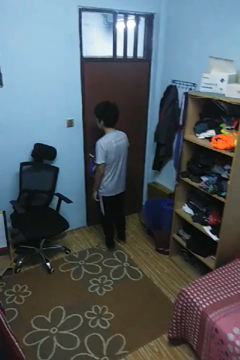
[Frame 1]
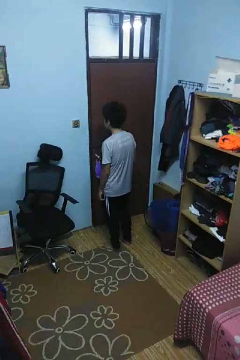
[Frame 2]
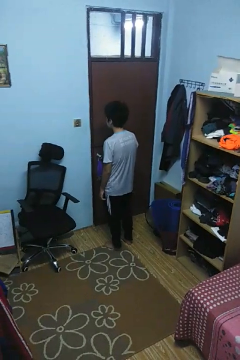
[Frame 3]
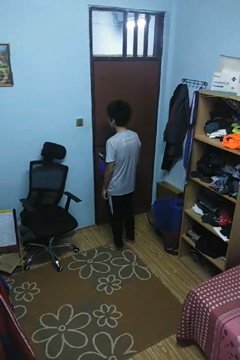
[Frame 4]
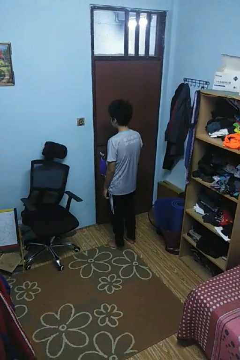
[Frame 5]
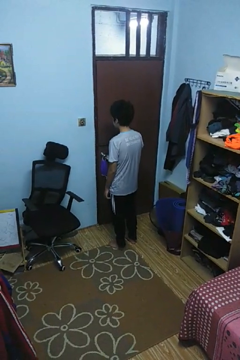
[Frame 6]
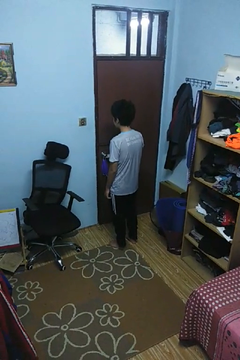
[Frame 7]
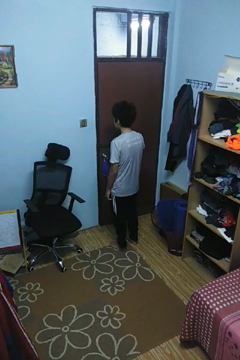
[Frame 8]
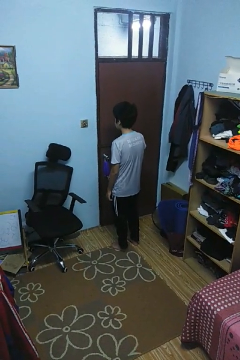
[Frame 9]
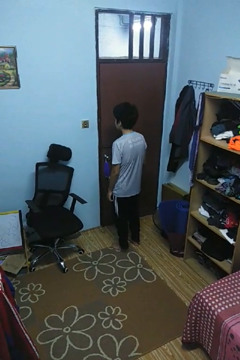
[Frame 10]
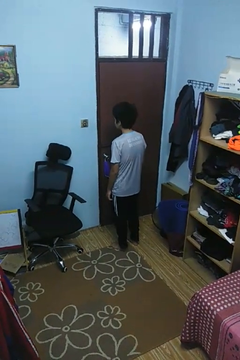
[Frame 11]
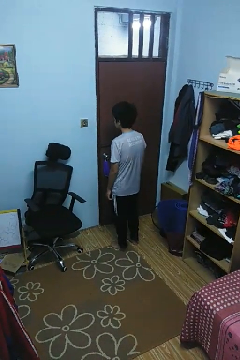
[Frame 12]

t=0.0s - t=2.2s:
person locks door with keys

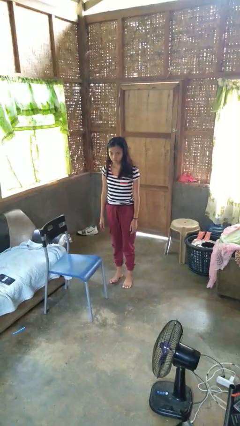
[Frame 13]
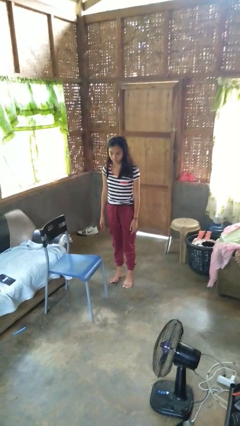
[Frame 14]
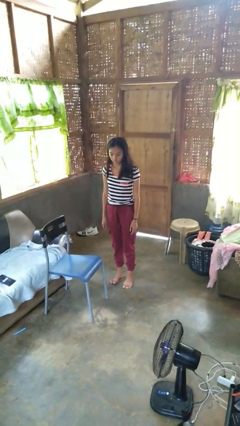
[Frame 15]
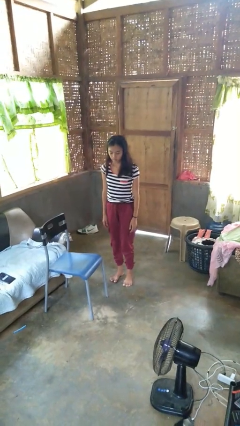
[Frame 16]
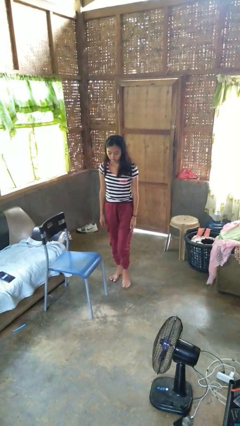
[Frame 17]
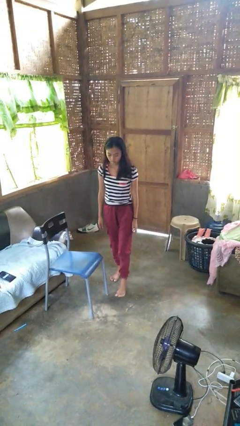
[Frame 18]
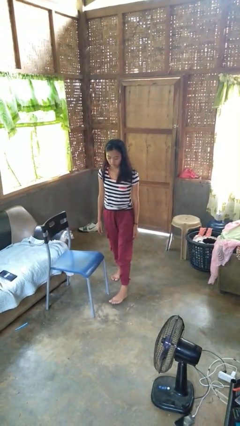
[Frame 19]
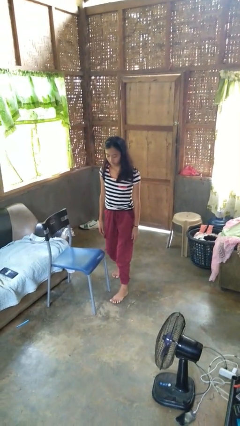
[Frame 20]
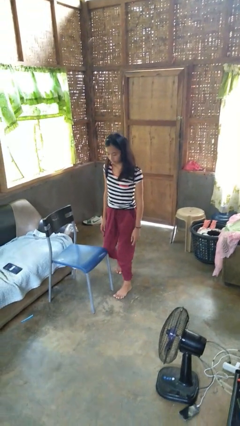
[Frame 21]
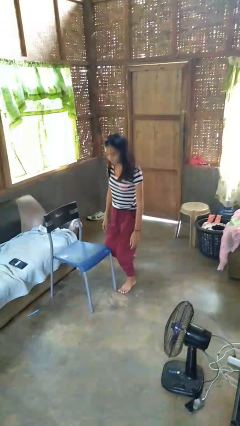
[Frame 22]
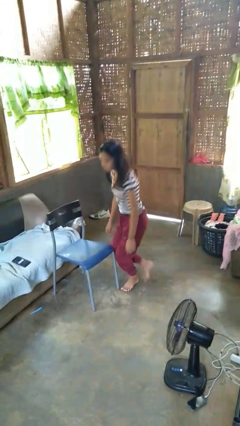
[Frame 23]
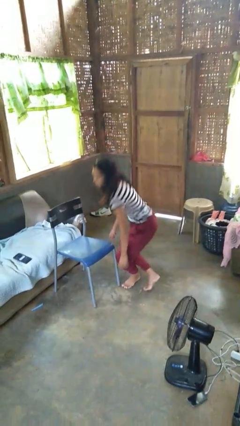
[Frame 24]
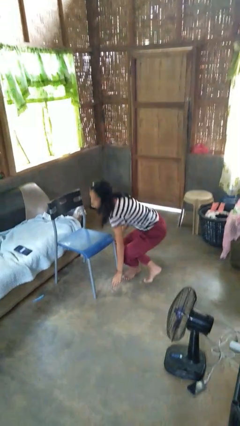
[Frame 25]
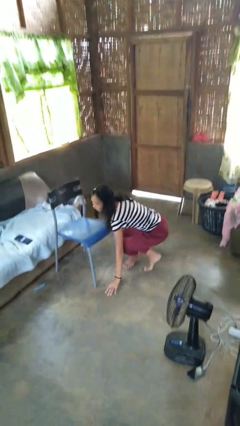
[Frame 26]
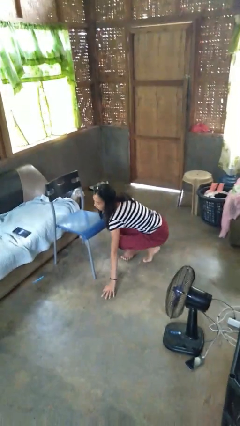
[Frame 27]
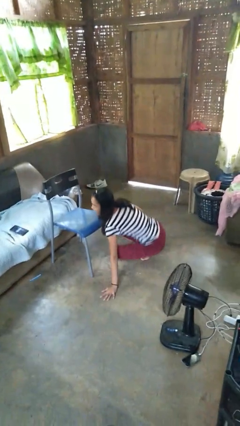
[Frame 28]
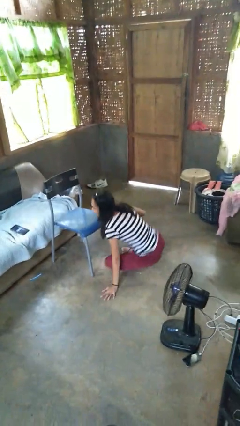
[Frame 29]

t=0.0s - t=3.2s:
person trips on object on floor

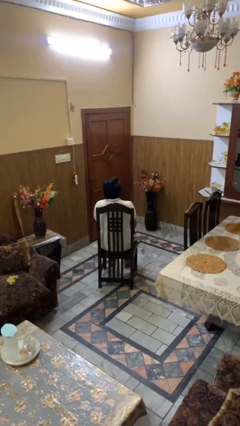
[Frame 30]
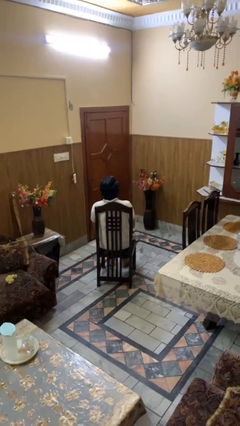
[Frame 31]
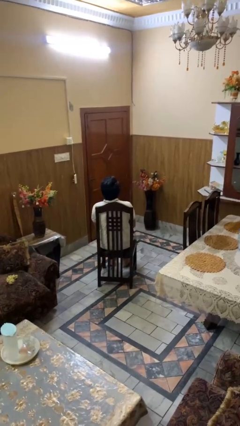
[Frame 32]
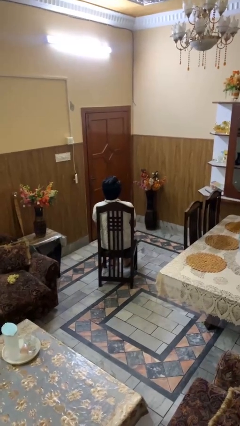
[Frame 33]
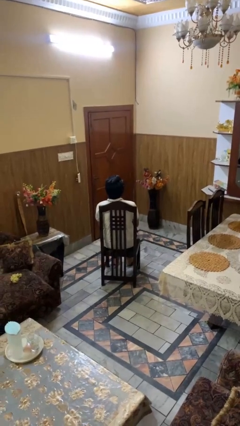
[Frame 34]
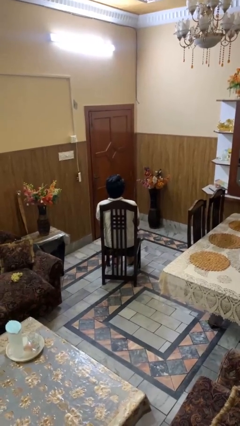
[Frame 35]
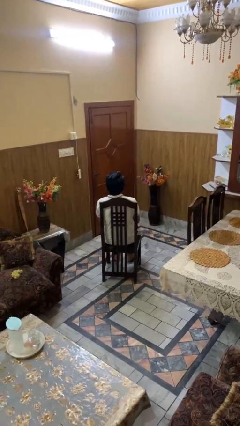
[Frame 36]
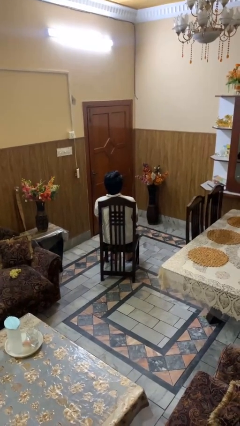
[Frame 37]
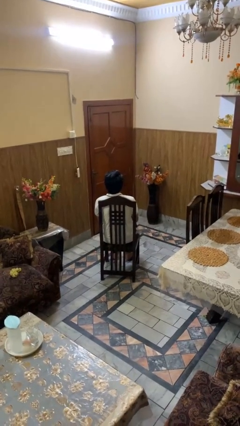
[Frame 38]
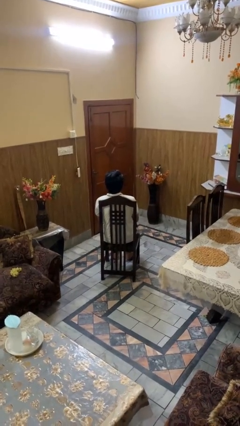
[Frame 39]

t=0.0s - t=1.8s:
person sits down

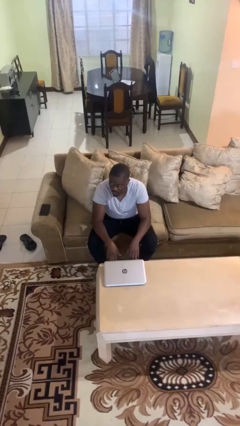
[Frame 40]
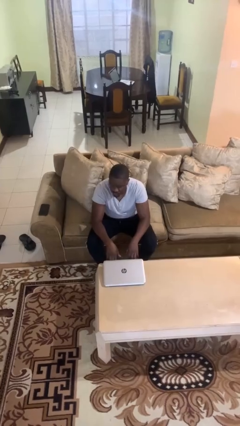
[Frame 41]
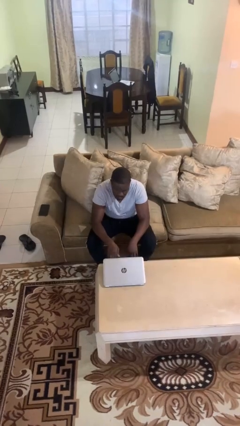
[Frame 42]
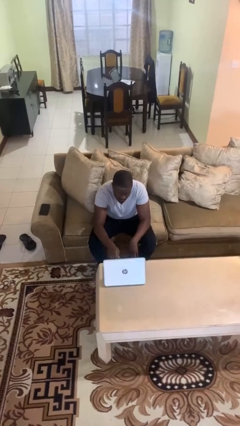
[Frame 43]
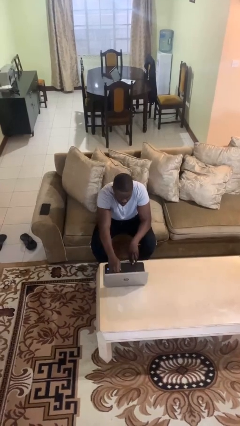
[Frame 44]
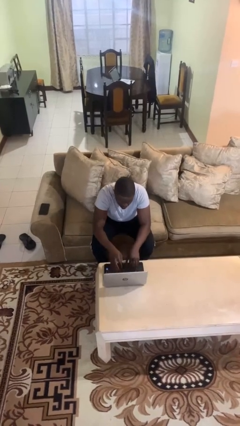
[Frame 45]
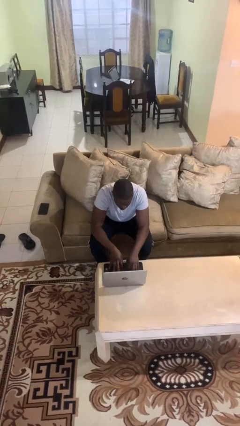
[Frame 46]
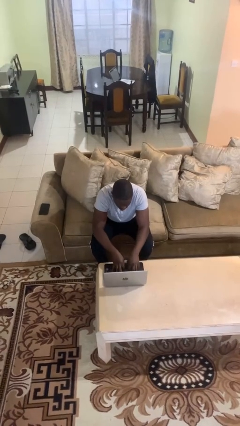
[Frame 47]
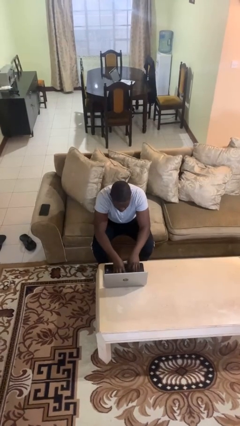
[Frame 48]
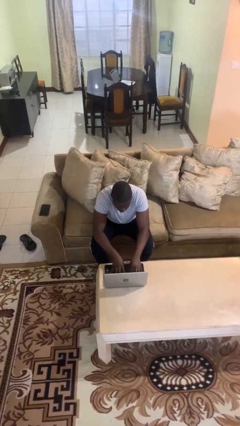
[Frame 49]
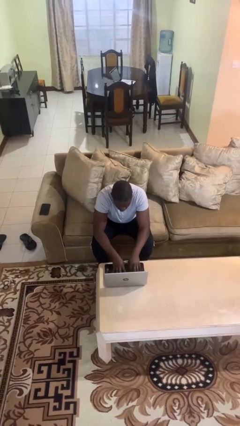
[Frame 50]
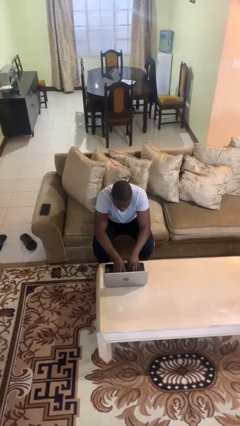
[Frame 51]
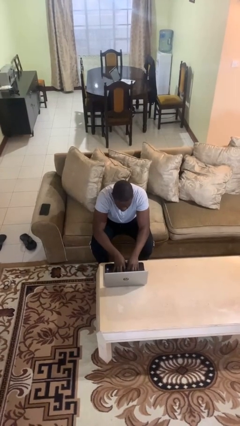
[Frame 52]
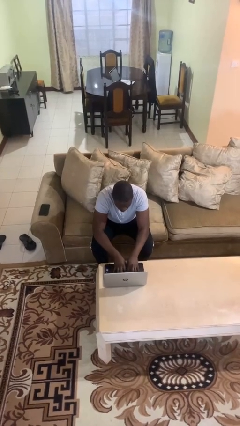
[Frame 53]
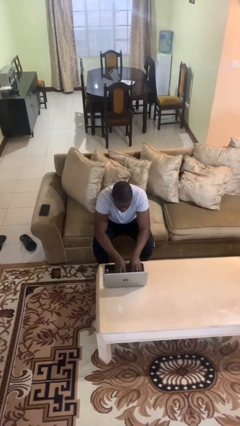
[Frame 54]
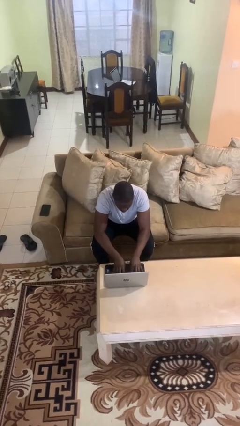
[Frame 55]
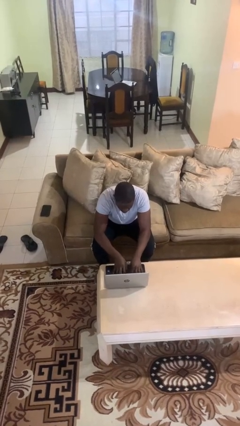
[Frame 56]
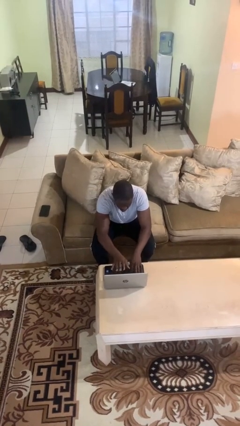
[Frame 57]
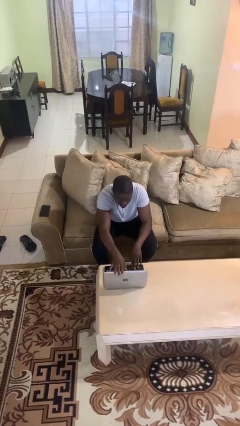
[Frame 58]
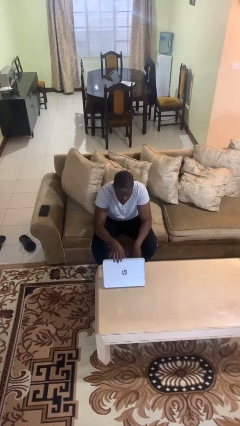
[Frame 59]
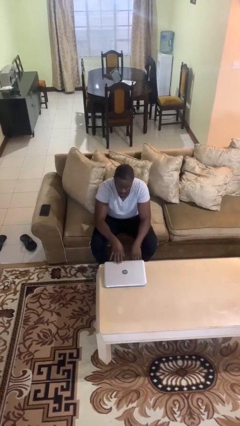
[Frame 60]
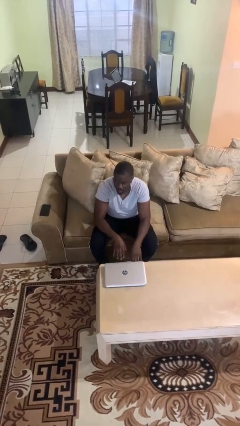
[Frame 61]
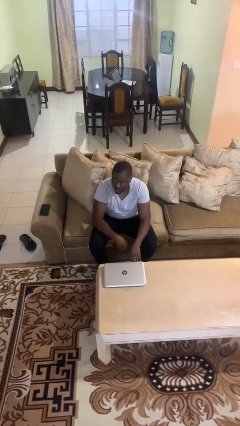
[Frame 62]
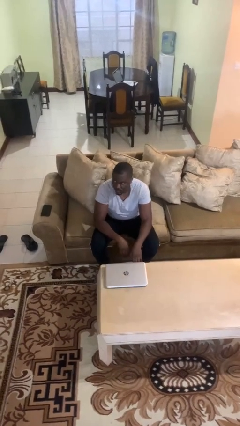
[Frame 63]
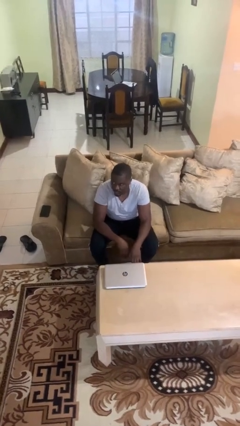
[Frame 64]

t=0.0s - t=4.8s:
person interacts with laptop

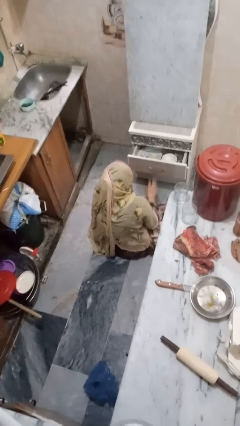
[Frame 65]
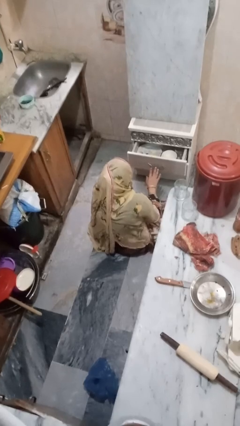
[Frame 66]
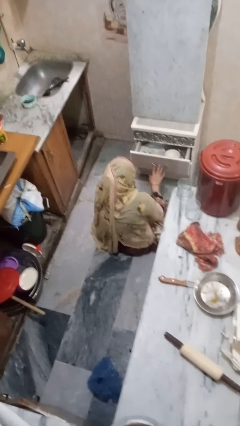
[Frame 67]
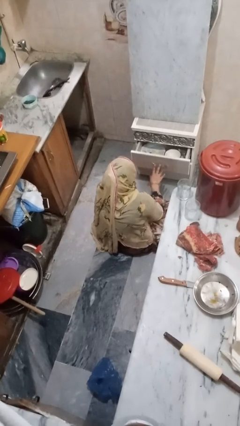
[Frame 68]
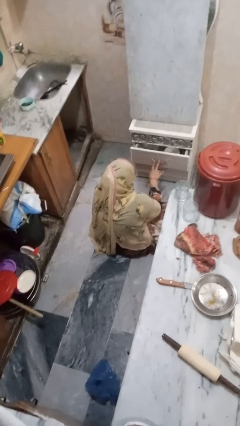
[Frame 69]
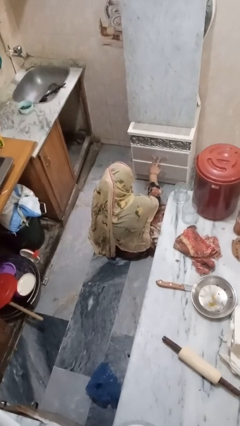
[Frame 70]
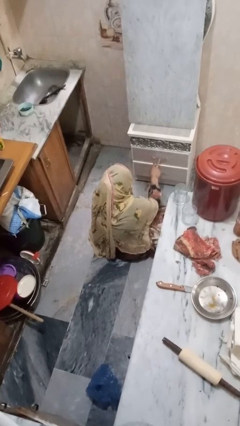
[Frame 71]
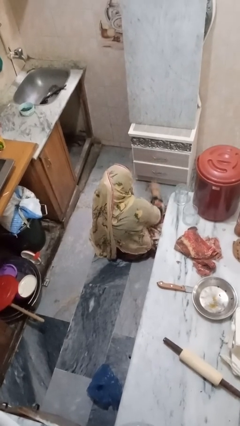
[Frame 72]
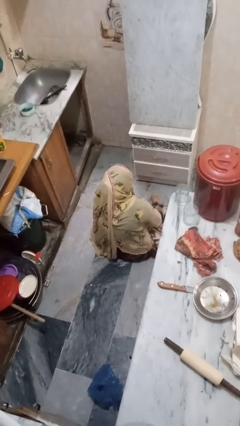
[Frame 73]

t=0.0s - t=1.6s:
person closes kitchen drawer

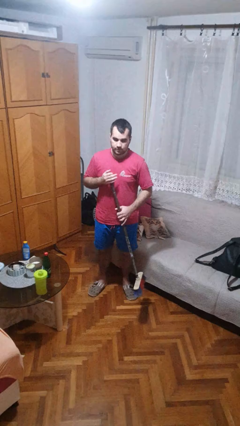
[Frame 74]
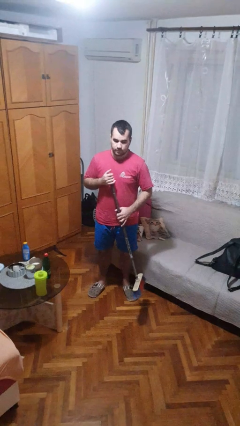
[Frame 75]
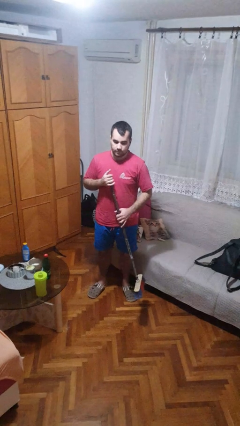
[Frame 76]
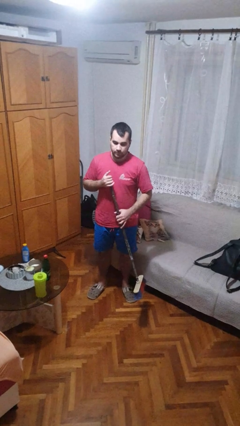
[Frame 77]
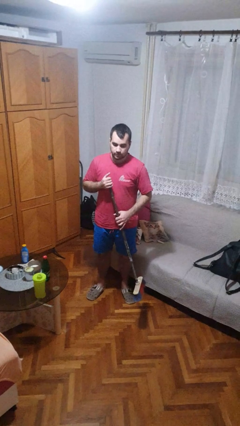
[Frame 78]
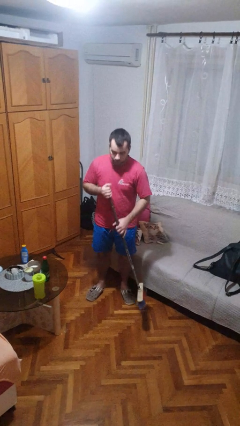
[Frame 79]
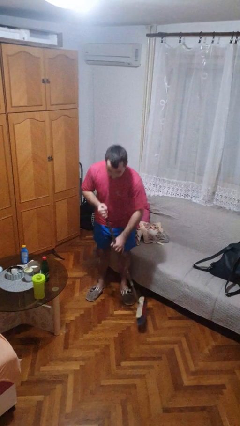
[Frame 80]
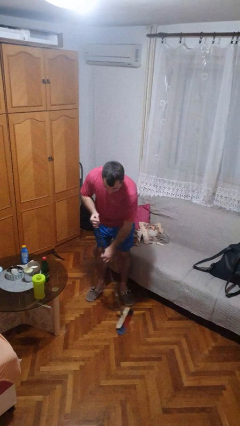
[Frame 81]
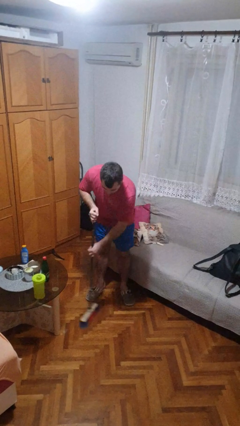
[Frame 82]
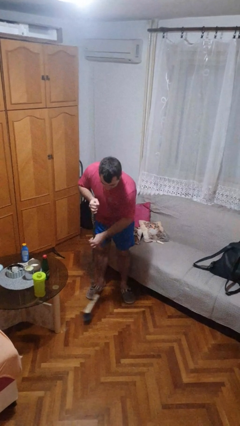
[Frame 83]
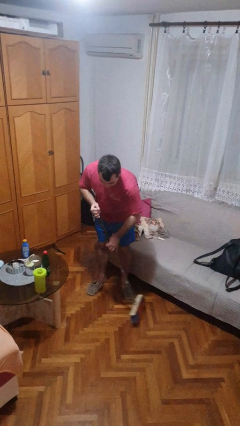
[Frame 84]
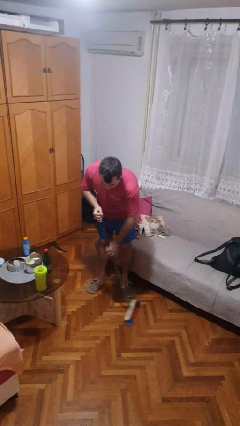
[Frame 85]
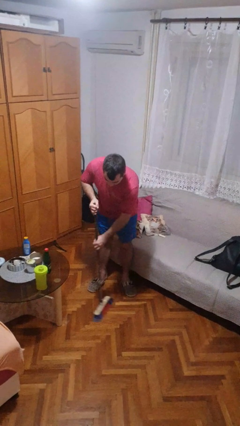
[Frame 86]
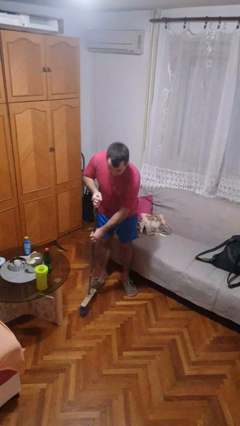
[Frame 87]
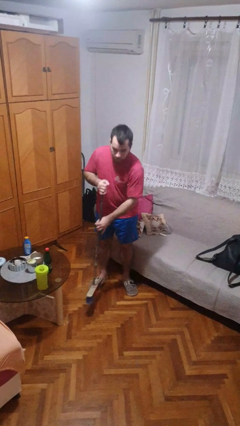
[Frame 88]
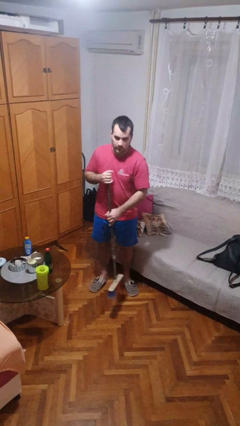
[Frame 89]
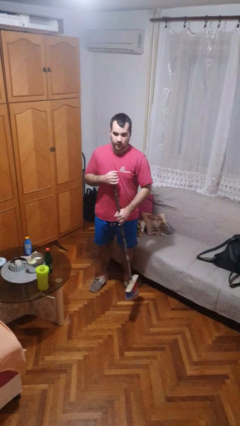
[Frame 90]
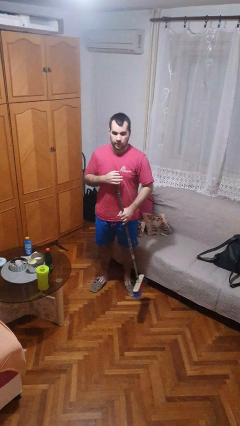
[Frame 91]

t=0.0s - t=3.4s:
person sweeps floor

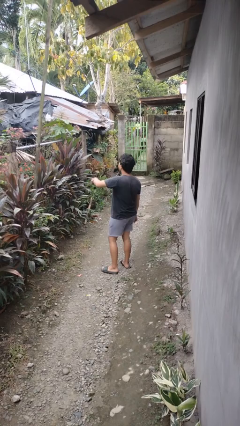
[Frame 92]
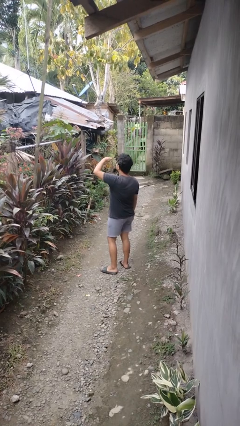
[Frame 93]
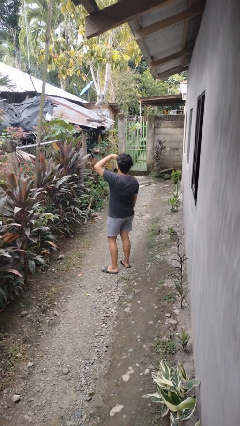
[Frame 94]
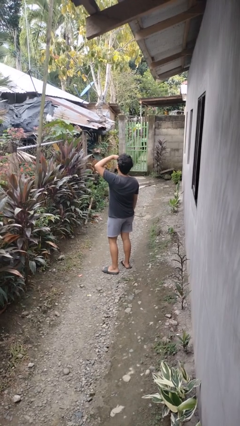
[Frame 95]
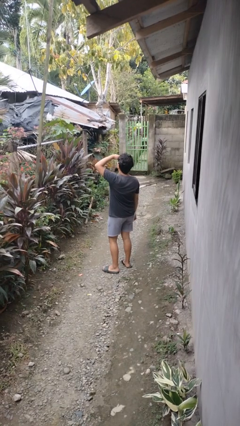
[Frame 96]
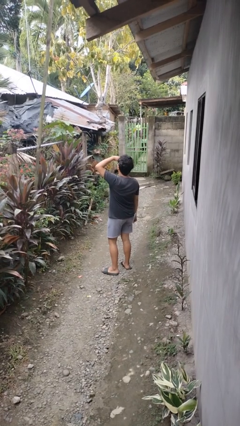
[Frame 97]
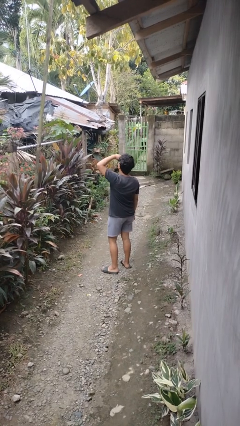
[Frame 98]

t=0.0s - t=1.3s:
person shades eyes
